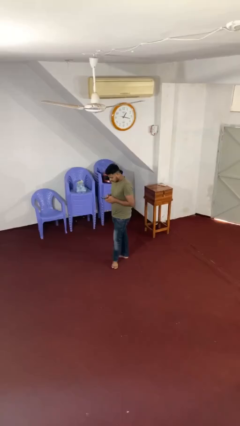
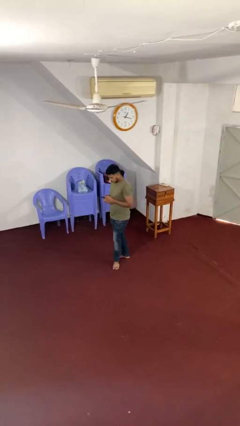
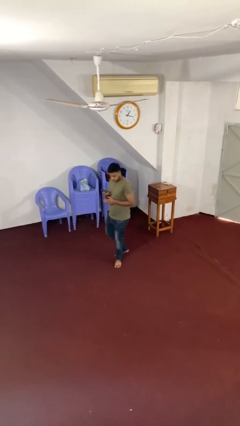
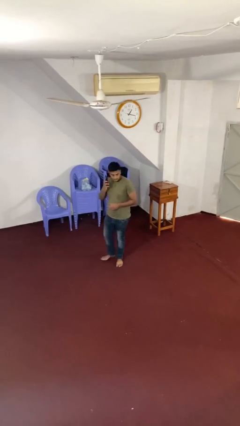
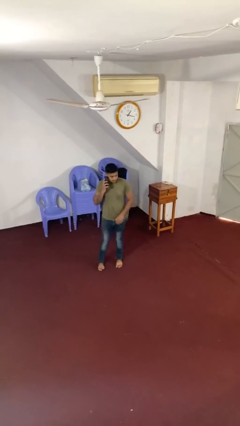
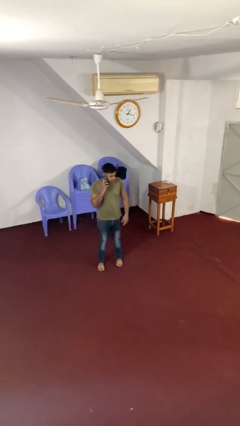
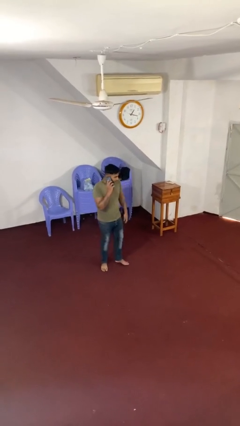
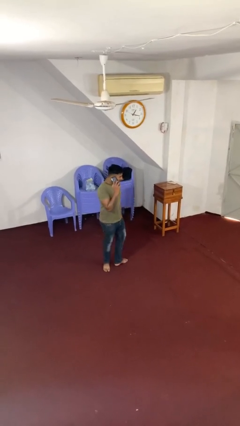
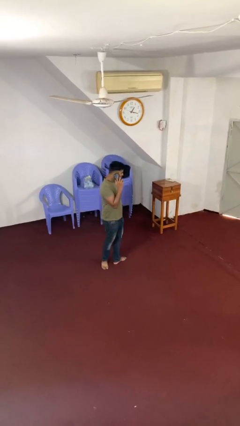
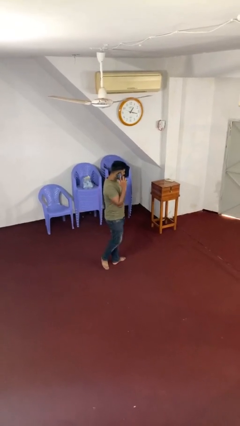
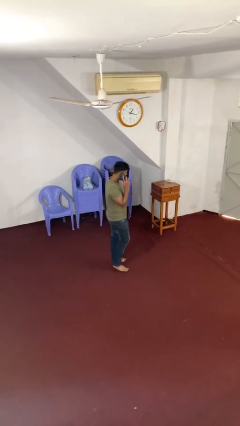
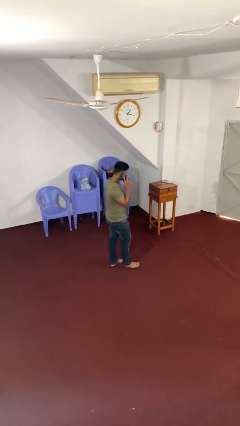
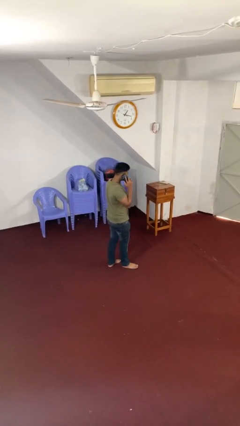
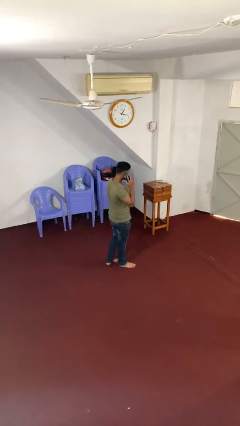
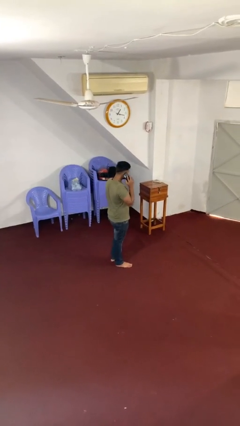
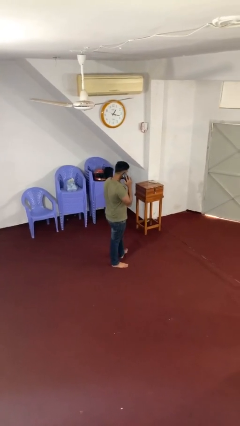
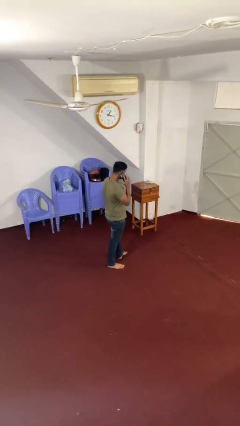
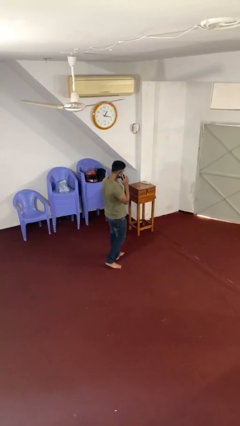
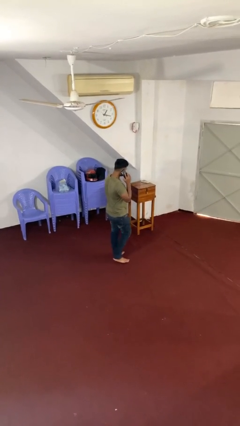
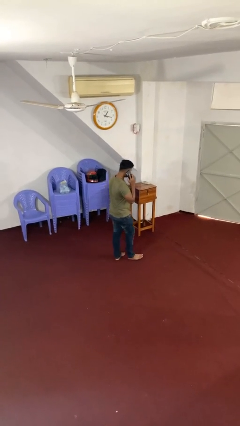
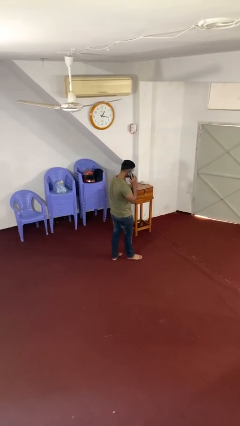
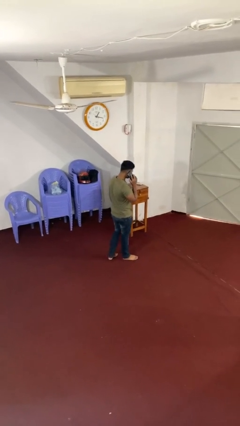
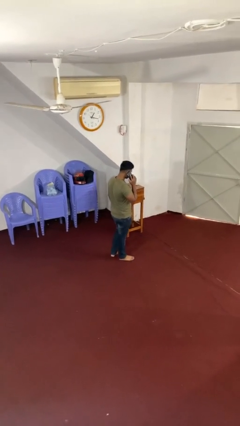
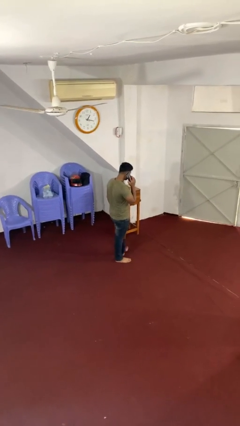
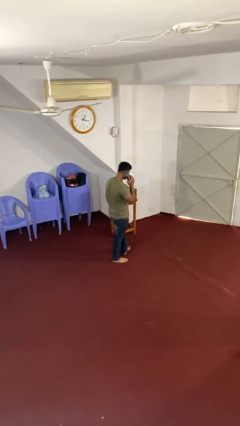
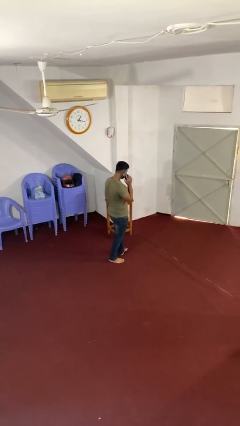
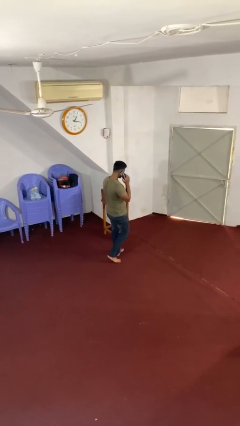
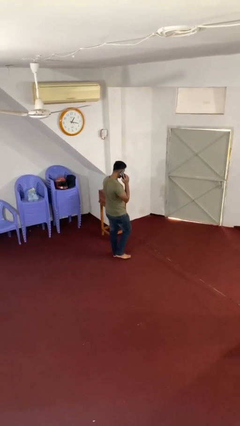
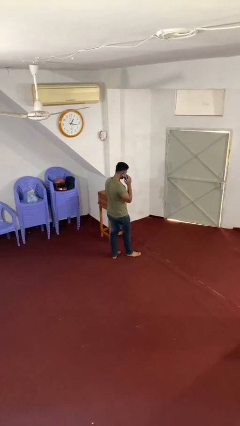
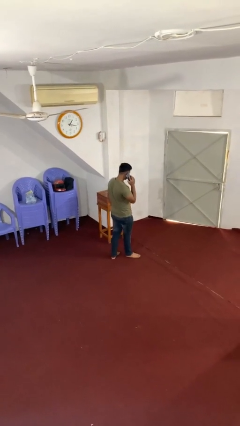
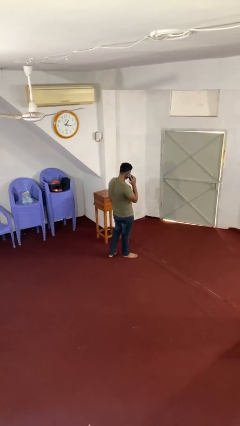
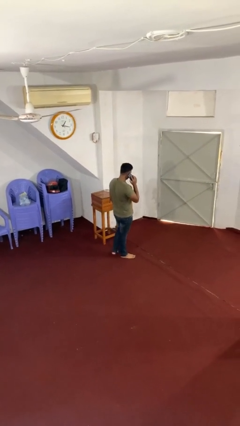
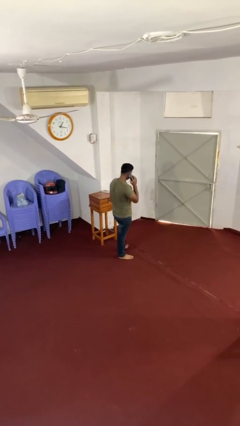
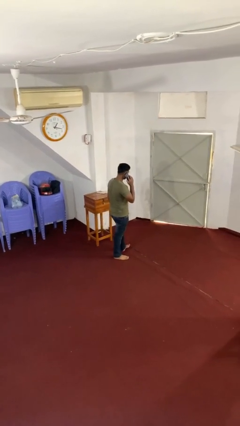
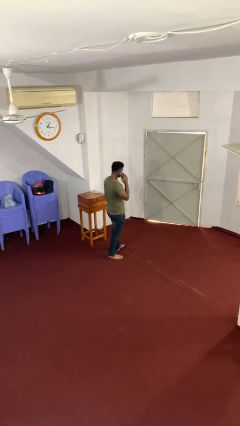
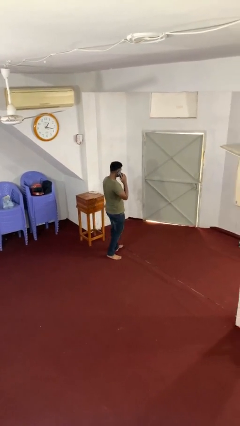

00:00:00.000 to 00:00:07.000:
person talks on phone

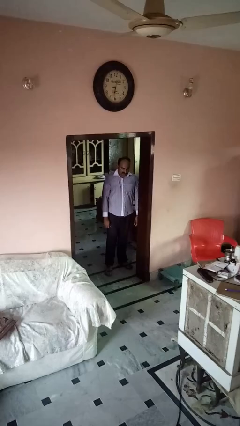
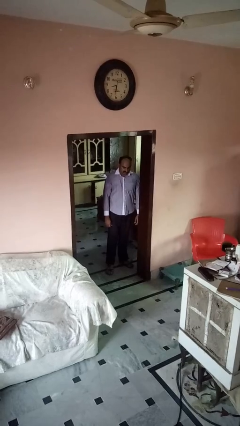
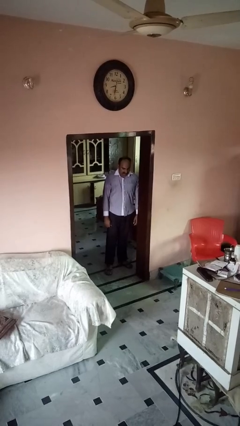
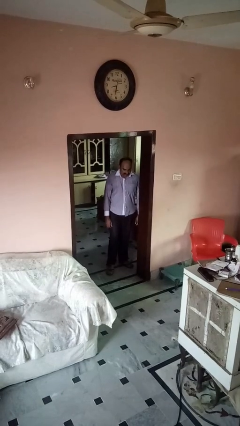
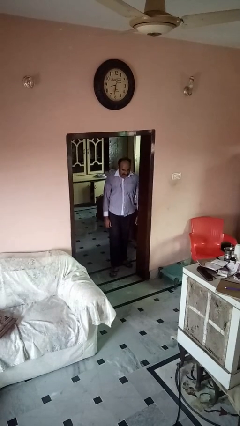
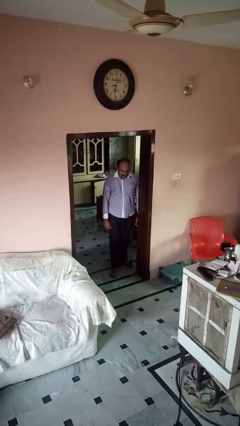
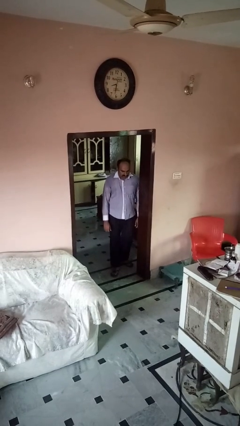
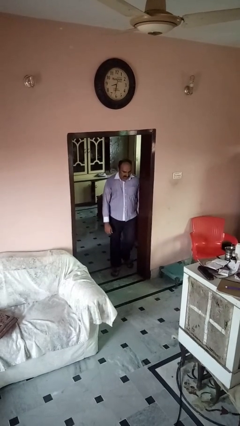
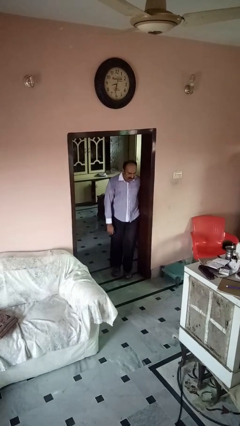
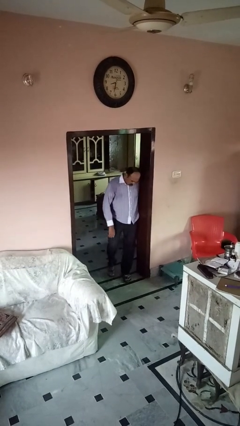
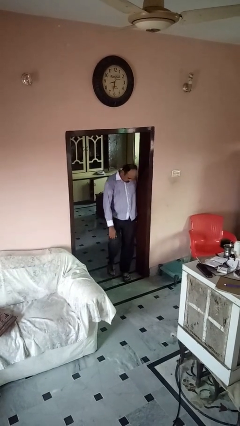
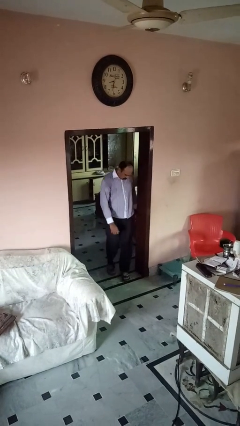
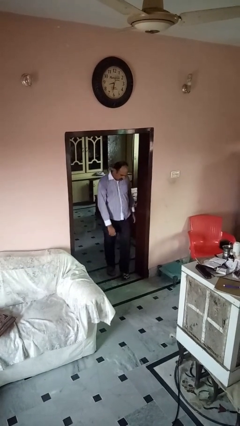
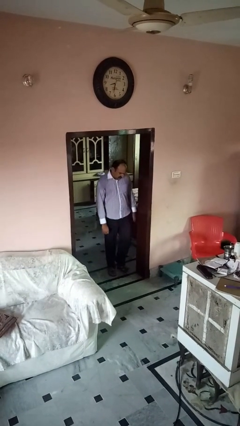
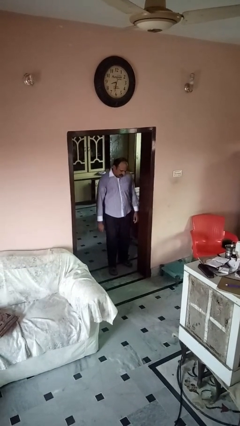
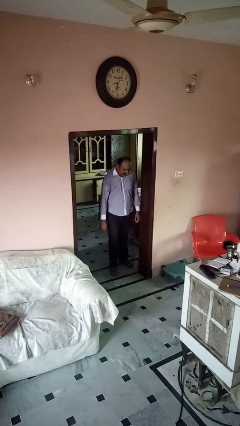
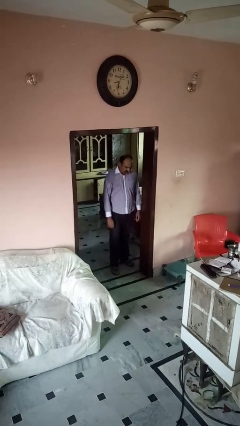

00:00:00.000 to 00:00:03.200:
person bumps into wall

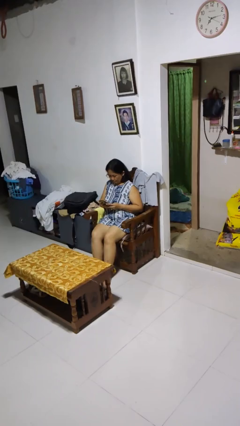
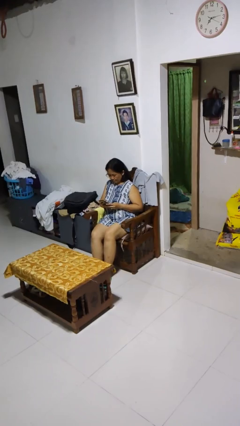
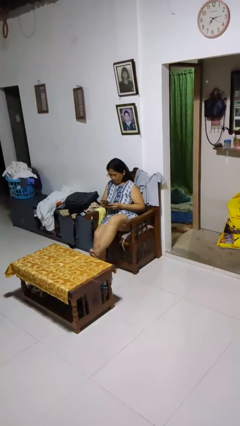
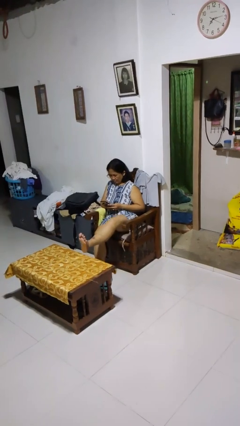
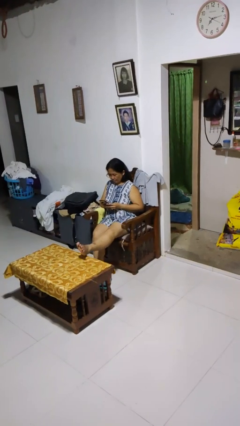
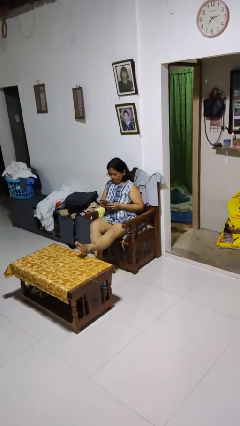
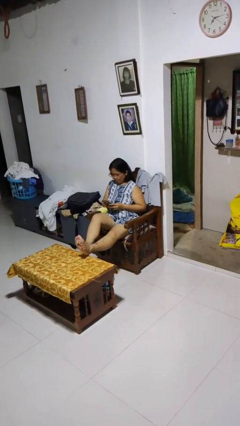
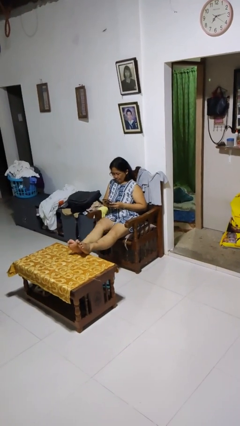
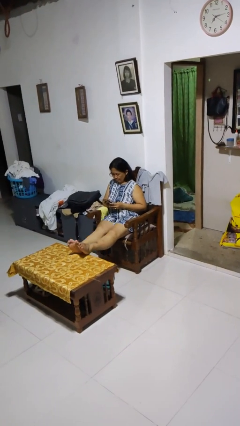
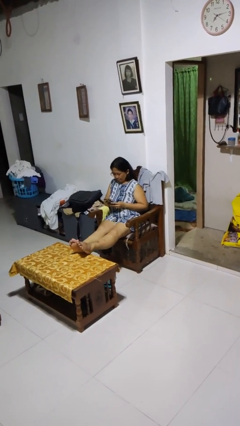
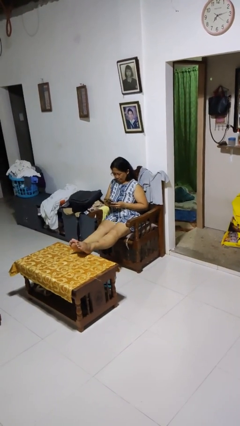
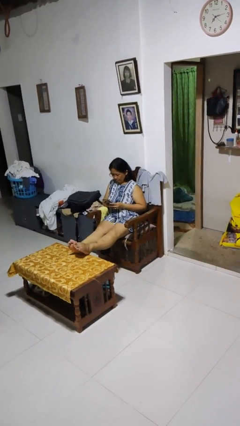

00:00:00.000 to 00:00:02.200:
person puts feet up

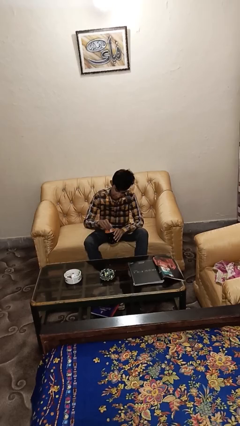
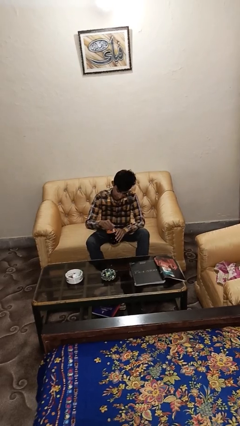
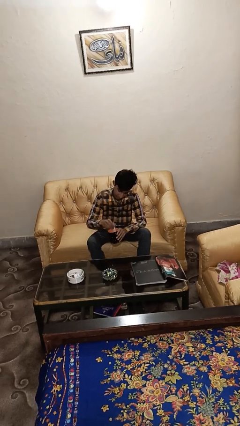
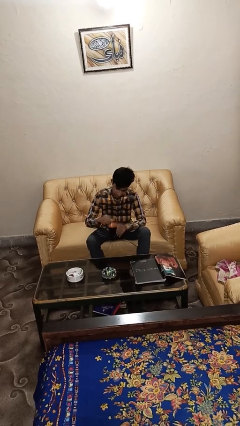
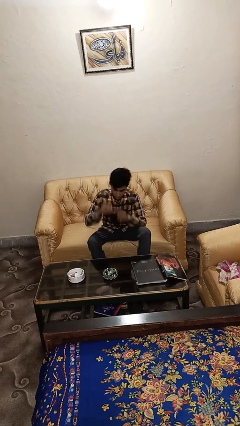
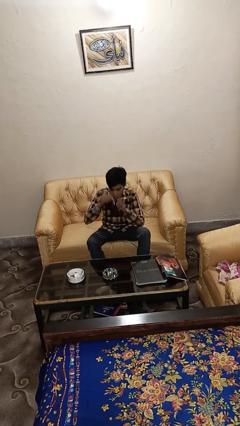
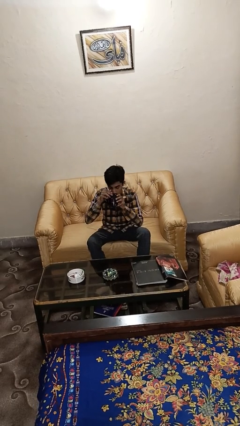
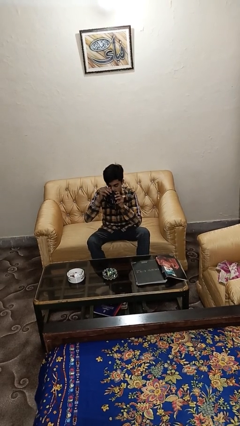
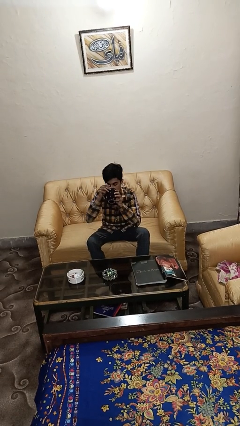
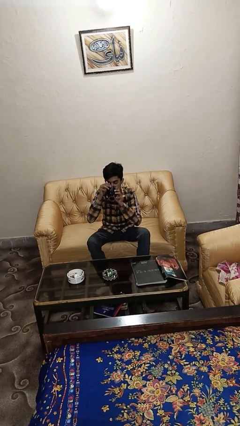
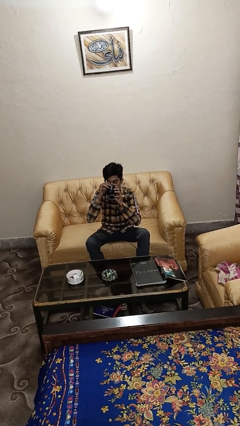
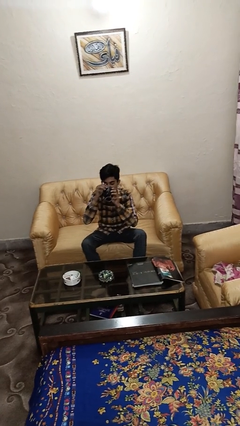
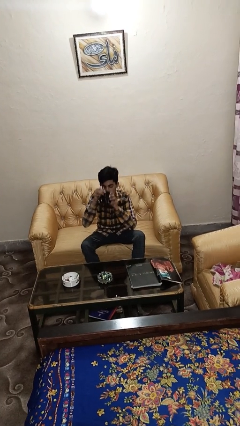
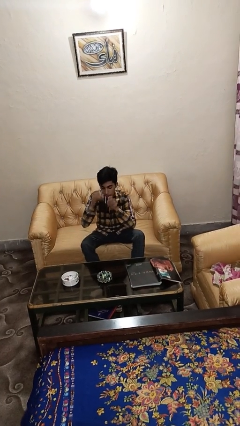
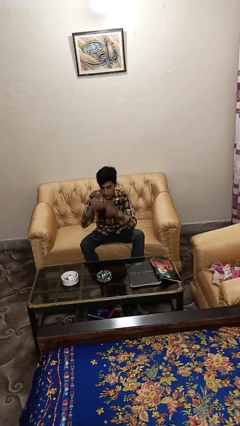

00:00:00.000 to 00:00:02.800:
person drinks from mug

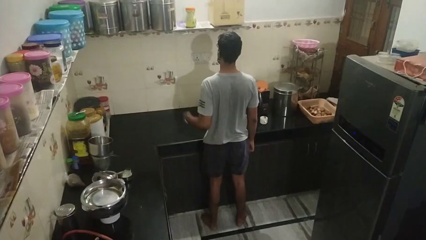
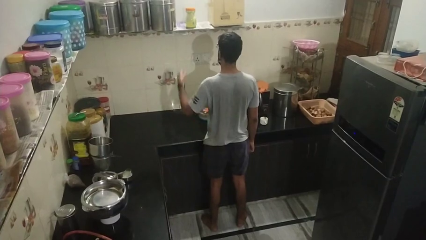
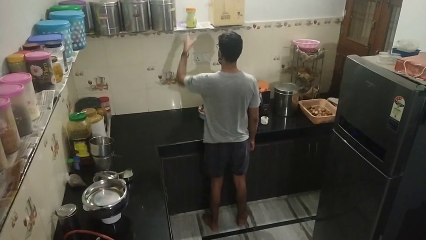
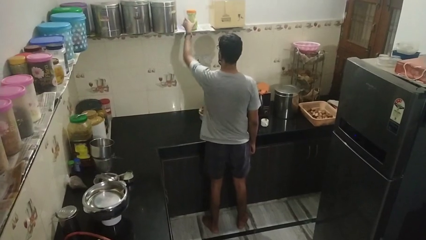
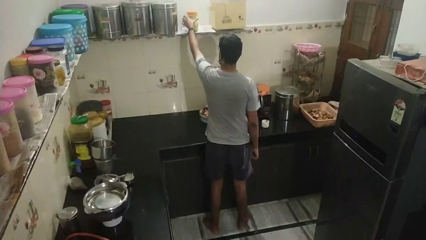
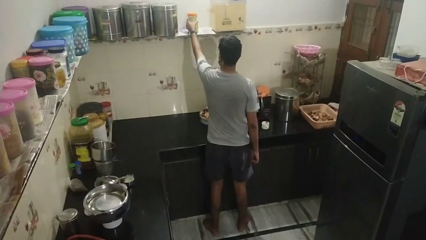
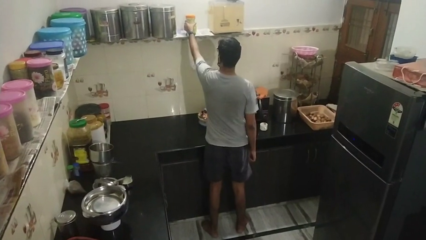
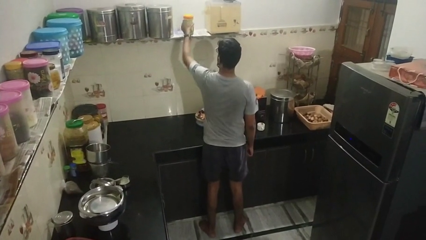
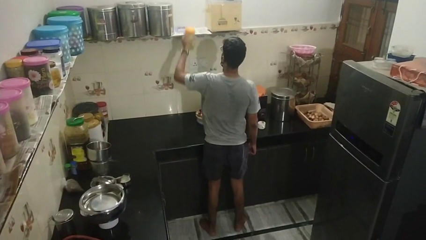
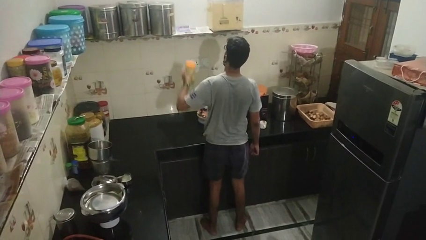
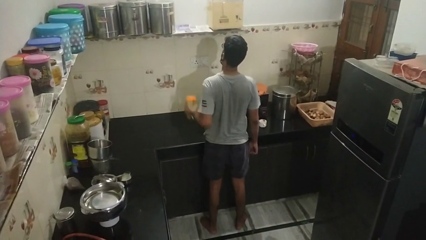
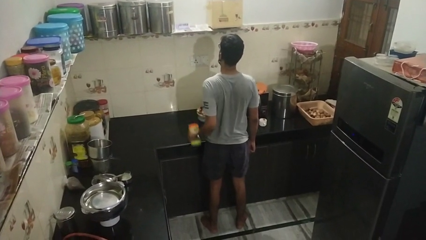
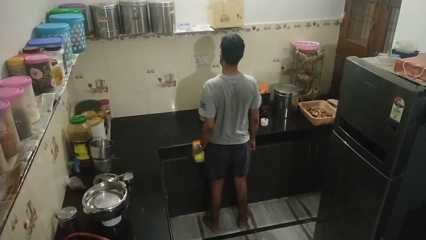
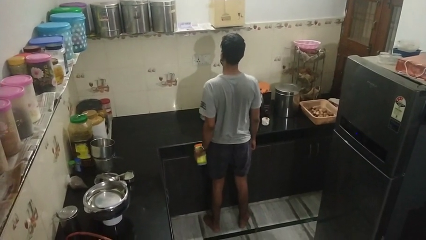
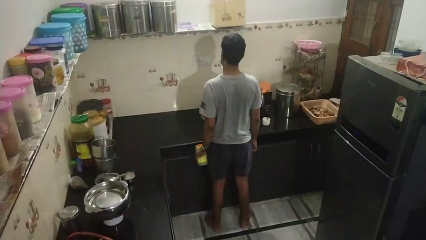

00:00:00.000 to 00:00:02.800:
person picks up object from shelf
